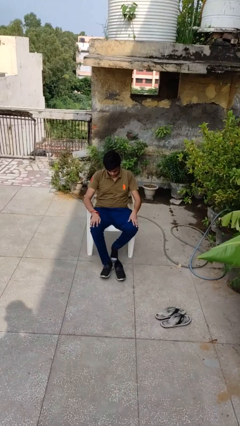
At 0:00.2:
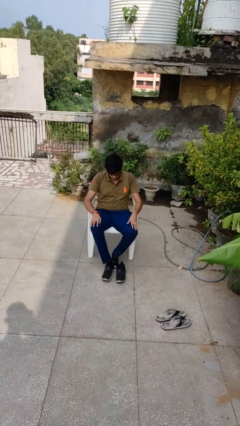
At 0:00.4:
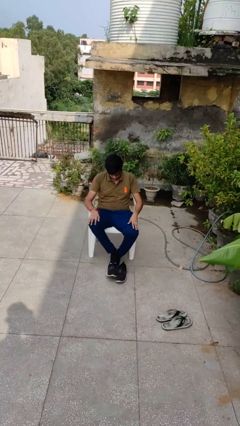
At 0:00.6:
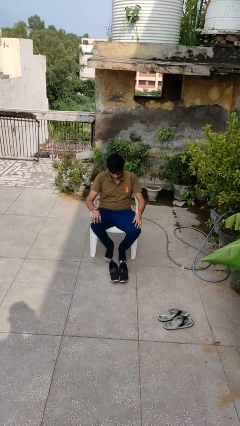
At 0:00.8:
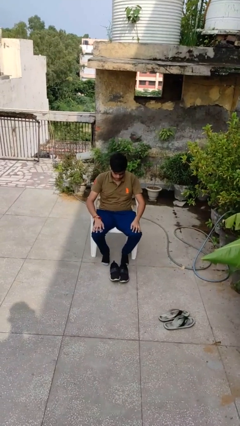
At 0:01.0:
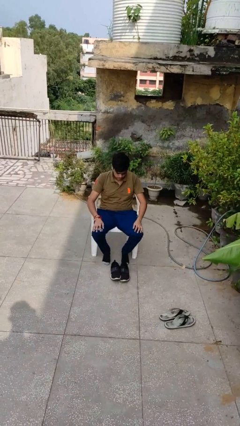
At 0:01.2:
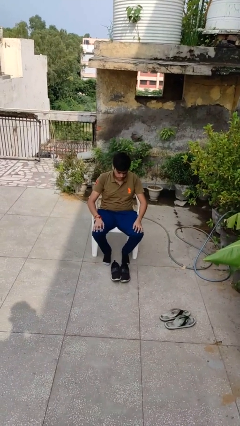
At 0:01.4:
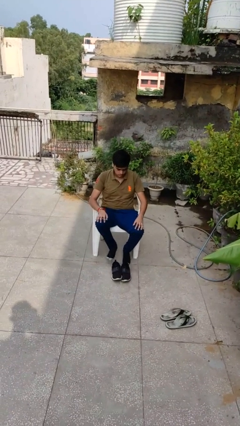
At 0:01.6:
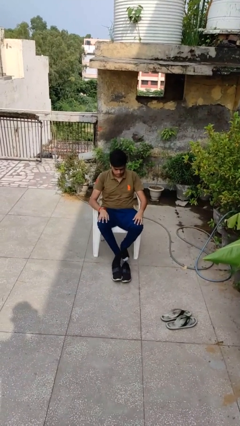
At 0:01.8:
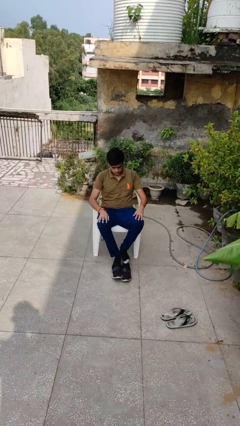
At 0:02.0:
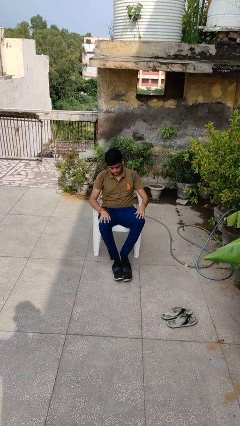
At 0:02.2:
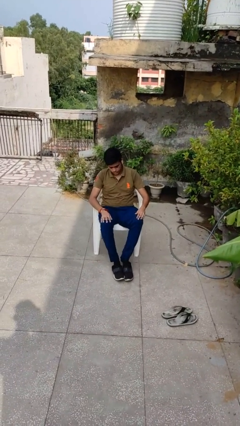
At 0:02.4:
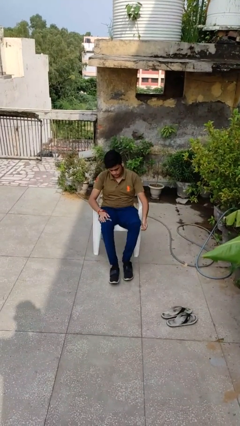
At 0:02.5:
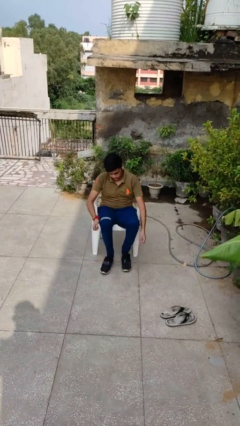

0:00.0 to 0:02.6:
person takes off shoes

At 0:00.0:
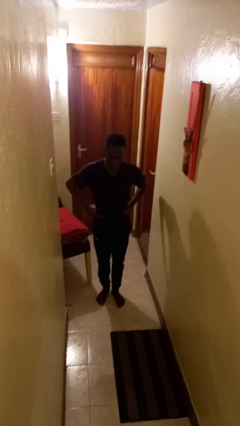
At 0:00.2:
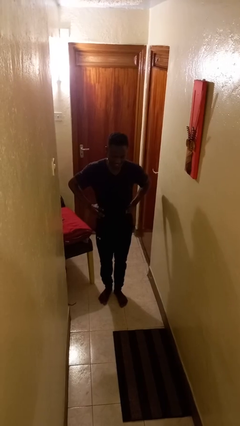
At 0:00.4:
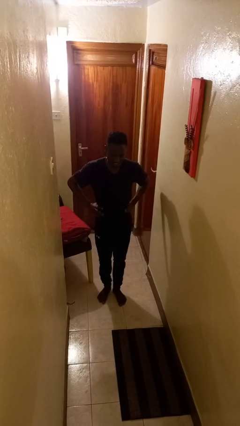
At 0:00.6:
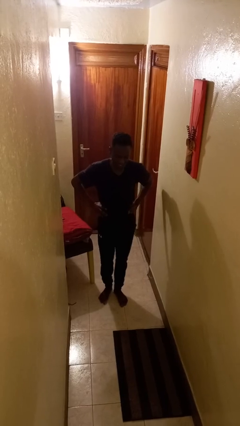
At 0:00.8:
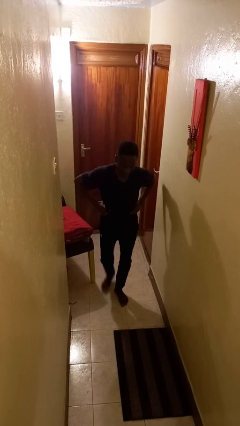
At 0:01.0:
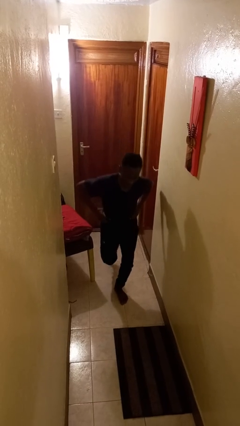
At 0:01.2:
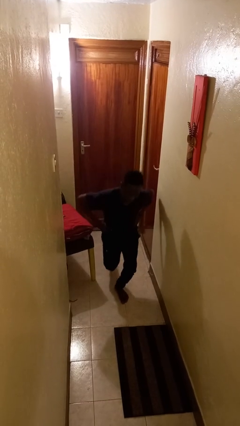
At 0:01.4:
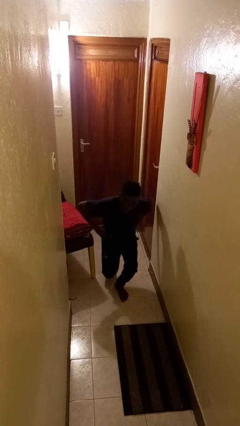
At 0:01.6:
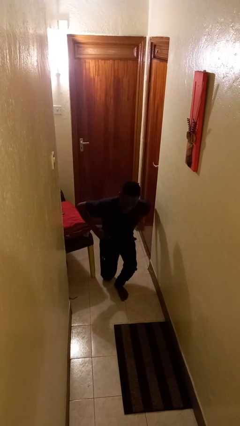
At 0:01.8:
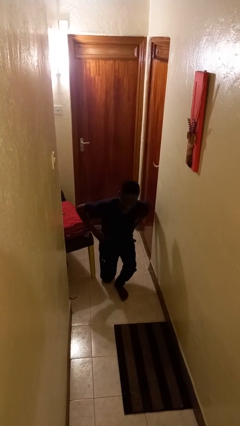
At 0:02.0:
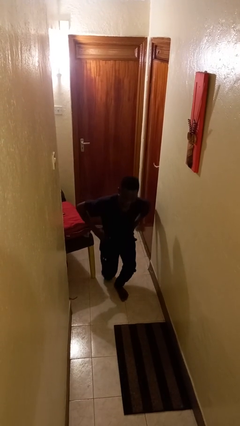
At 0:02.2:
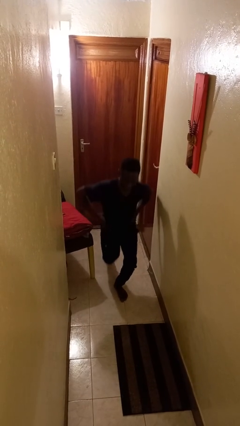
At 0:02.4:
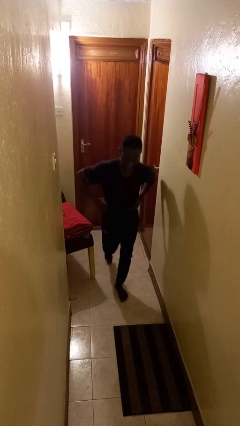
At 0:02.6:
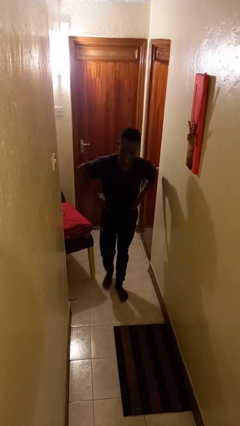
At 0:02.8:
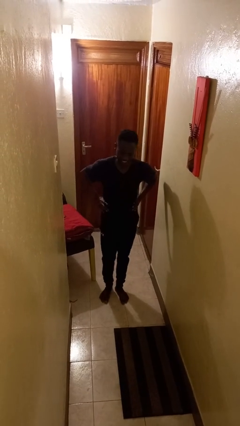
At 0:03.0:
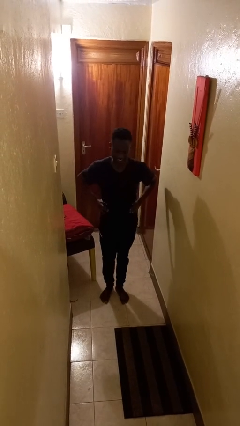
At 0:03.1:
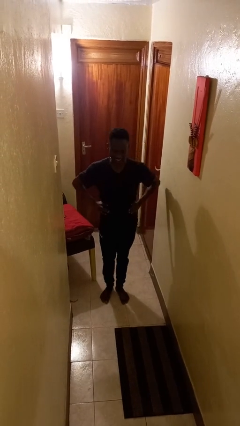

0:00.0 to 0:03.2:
person exercises with lunges

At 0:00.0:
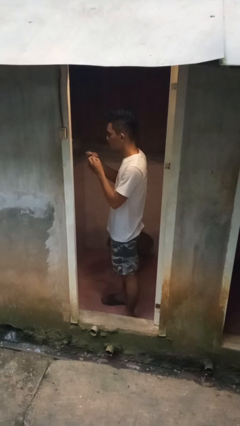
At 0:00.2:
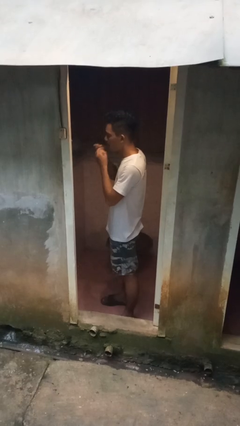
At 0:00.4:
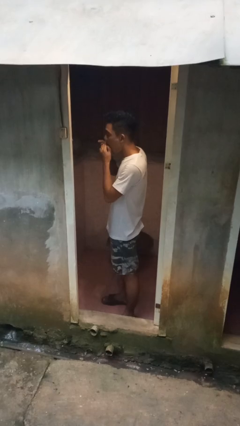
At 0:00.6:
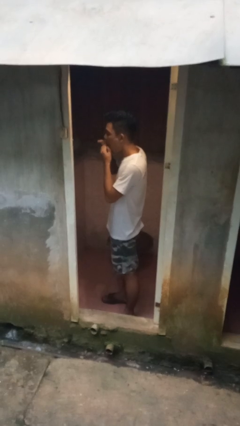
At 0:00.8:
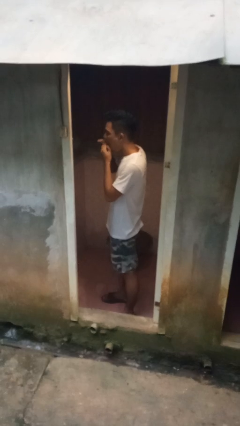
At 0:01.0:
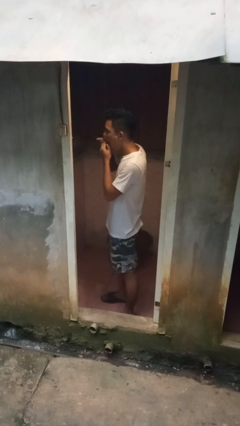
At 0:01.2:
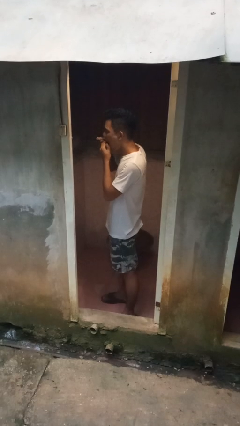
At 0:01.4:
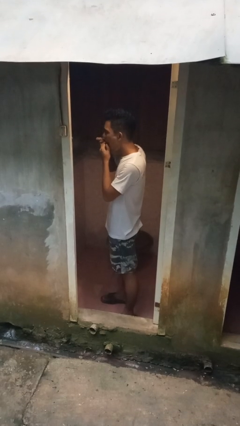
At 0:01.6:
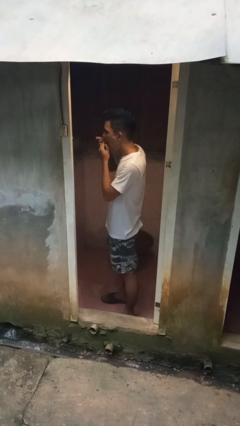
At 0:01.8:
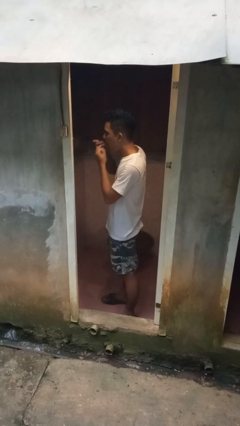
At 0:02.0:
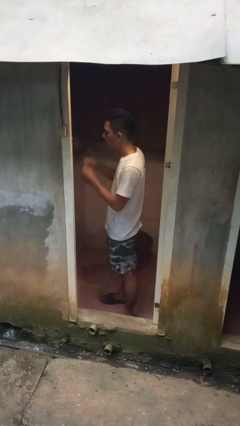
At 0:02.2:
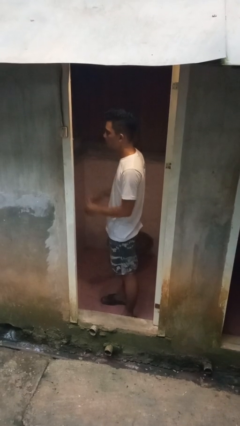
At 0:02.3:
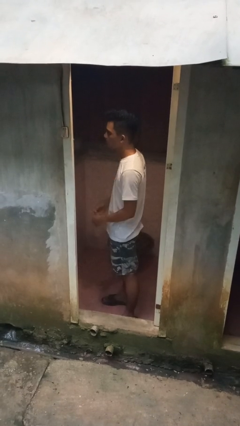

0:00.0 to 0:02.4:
person flosses

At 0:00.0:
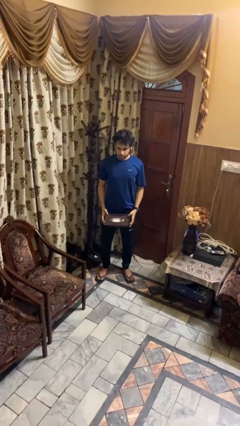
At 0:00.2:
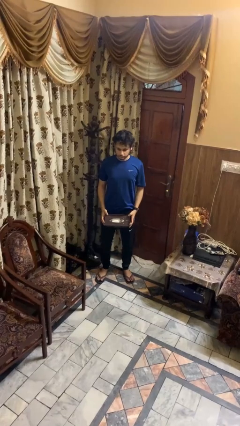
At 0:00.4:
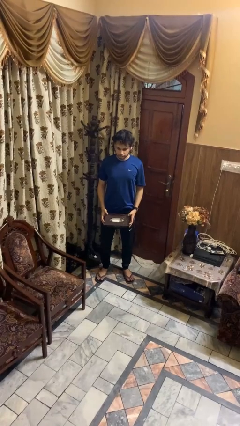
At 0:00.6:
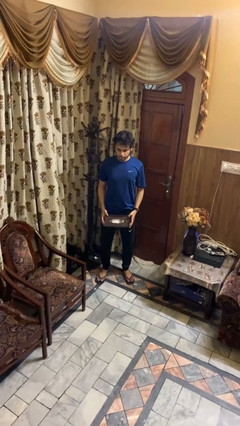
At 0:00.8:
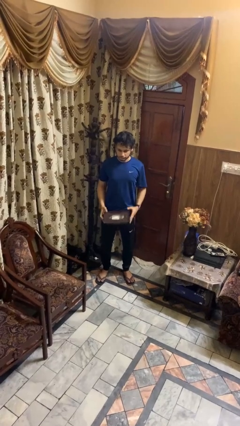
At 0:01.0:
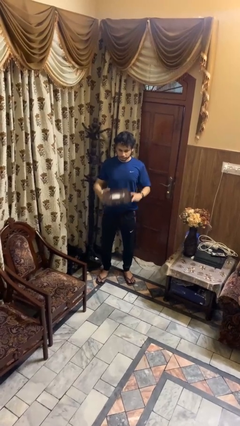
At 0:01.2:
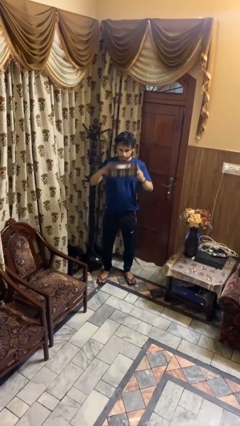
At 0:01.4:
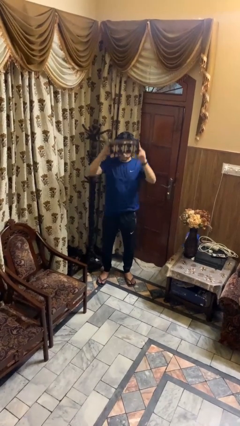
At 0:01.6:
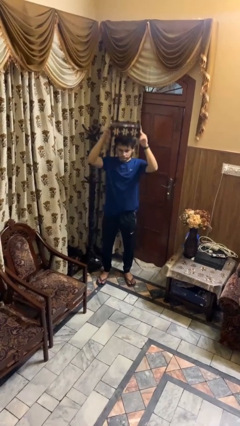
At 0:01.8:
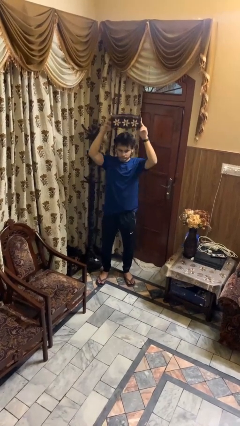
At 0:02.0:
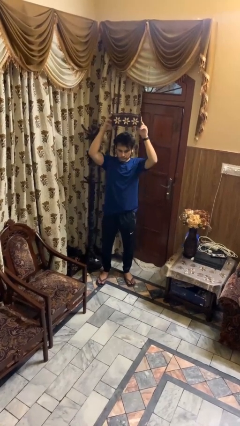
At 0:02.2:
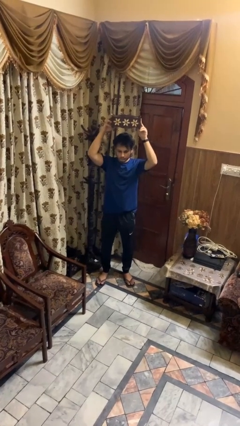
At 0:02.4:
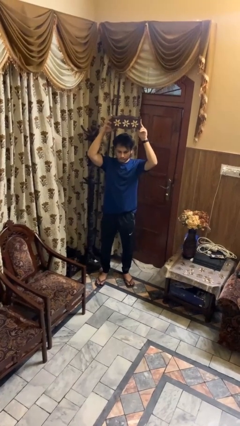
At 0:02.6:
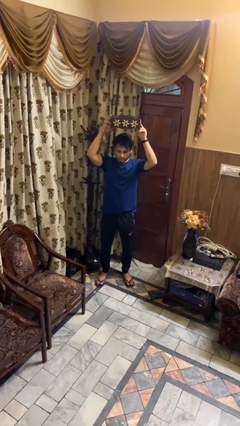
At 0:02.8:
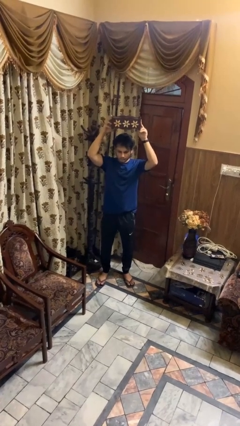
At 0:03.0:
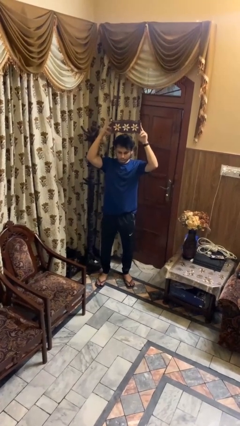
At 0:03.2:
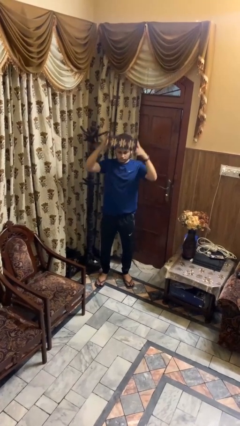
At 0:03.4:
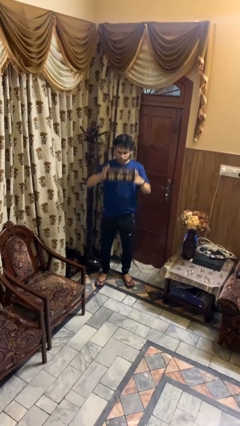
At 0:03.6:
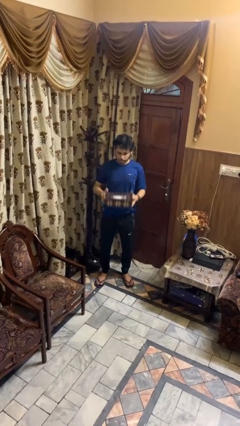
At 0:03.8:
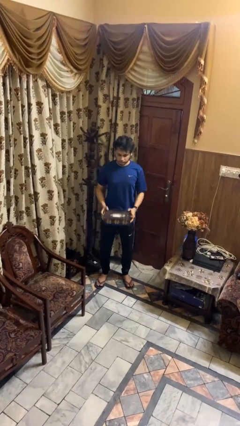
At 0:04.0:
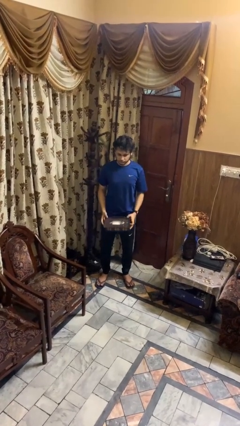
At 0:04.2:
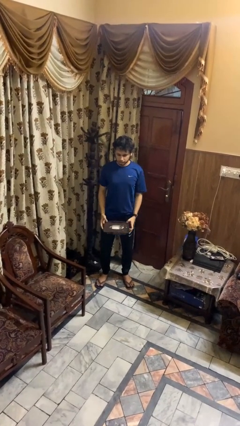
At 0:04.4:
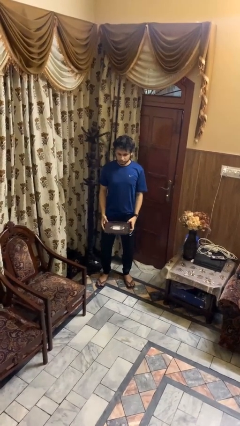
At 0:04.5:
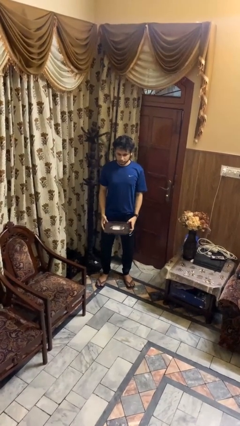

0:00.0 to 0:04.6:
person holds object above head

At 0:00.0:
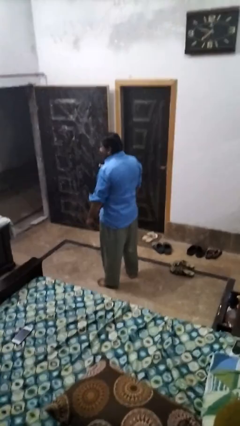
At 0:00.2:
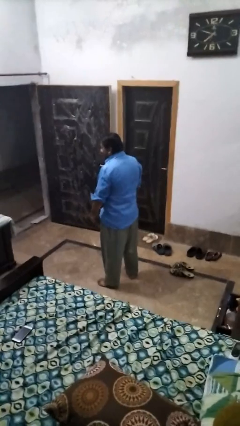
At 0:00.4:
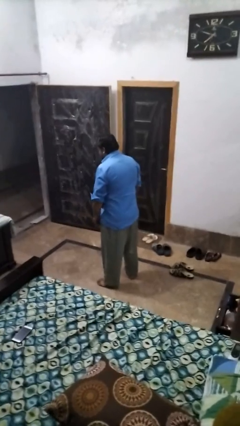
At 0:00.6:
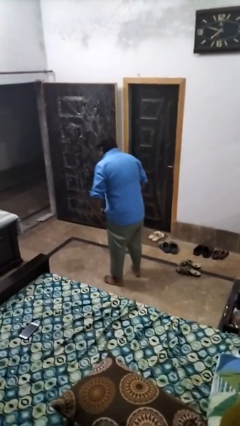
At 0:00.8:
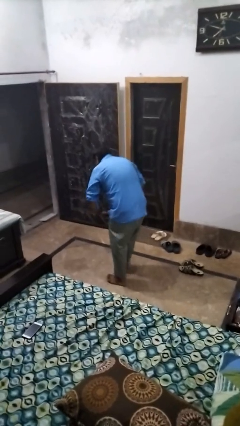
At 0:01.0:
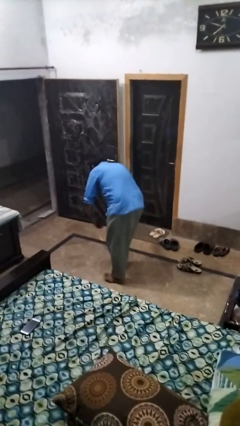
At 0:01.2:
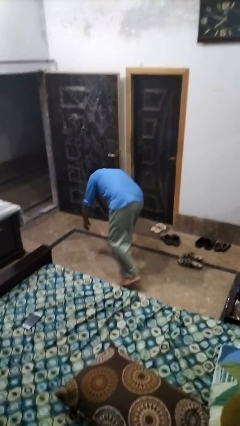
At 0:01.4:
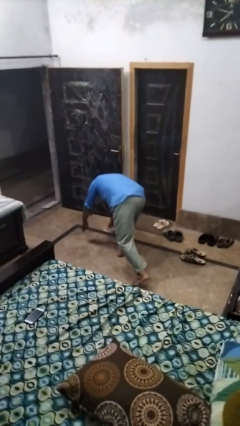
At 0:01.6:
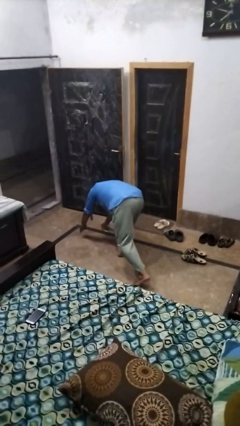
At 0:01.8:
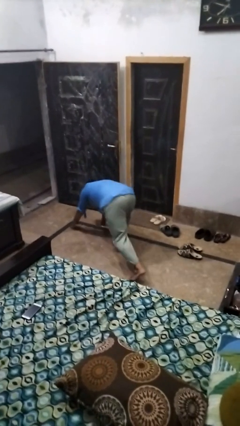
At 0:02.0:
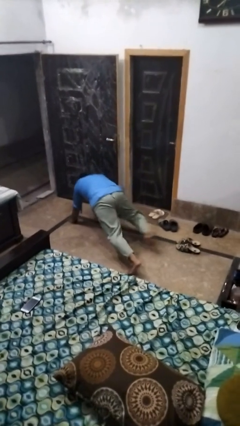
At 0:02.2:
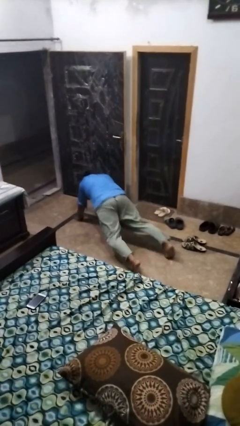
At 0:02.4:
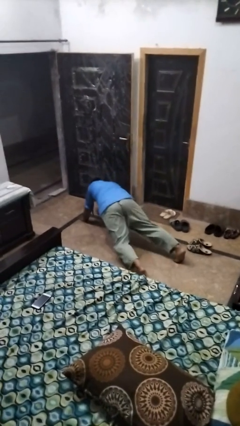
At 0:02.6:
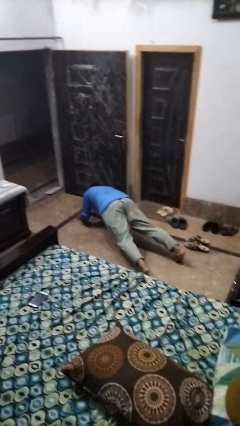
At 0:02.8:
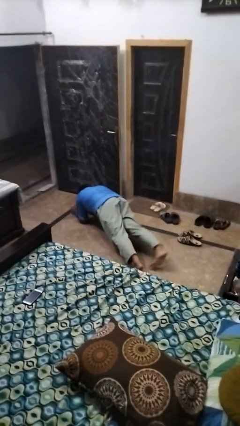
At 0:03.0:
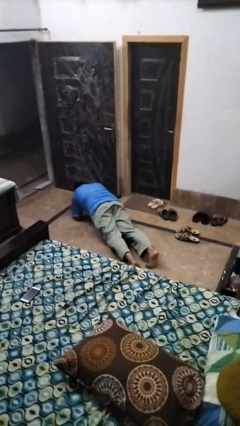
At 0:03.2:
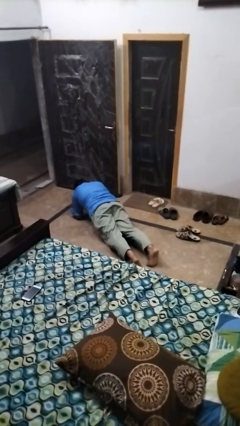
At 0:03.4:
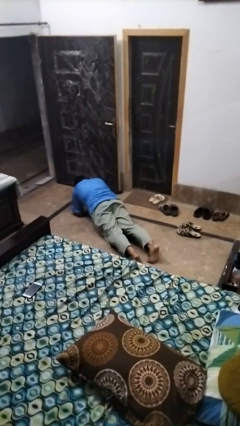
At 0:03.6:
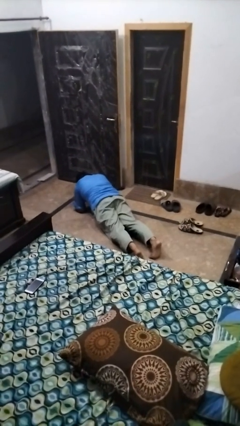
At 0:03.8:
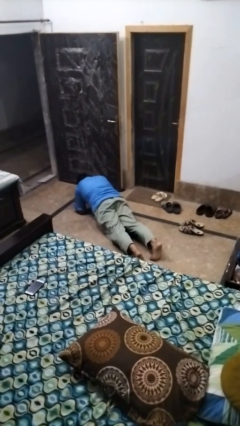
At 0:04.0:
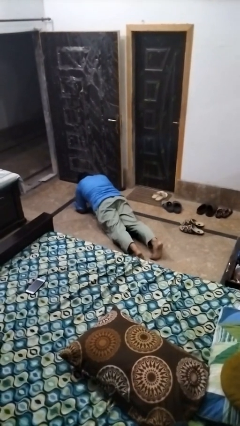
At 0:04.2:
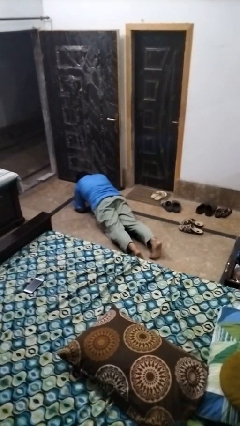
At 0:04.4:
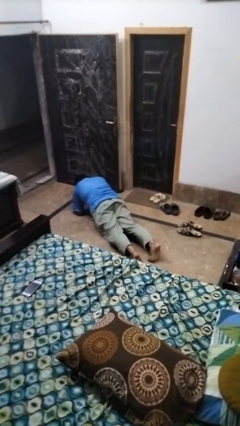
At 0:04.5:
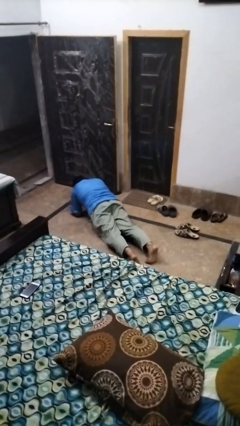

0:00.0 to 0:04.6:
person exercises with plank
